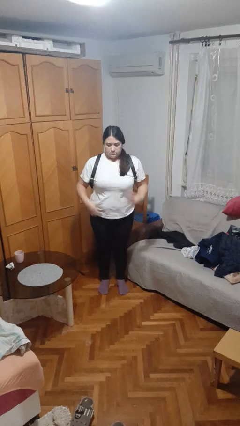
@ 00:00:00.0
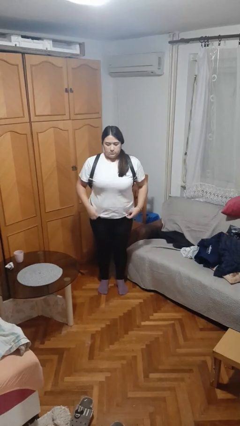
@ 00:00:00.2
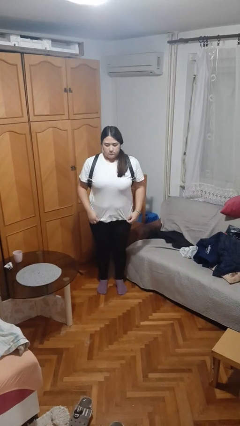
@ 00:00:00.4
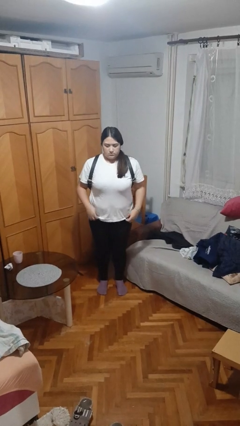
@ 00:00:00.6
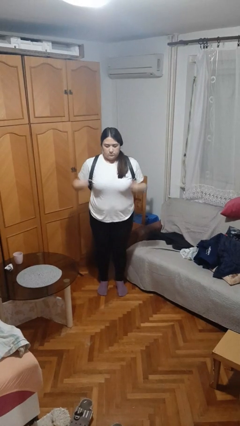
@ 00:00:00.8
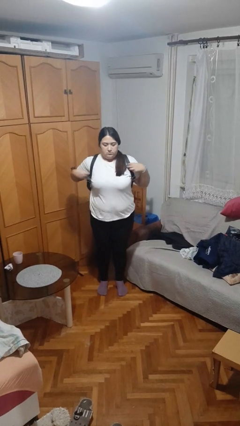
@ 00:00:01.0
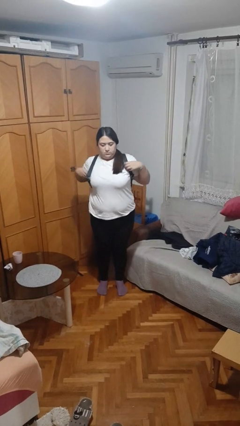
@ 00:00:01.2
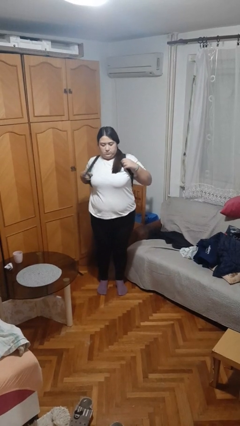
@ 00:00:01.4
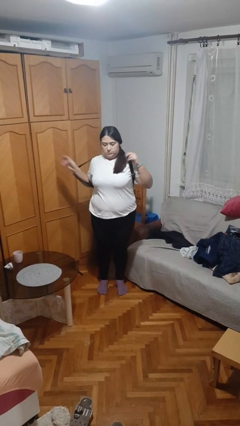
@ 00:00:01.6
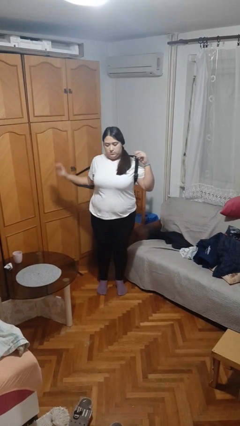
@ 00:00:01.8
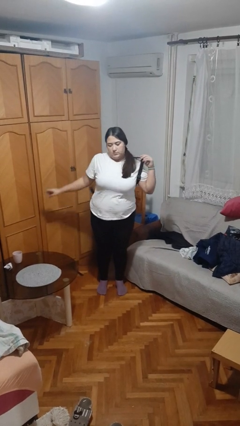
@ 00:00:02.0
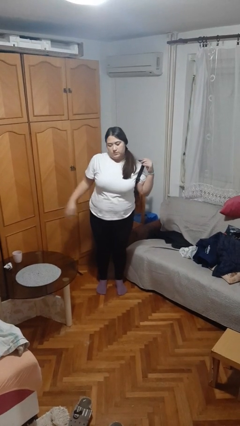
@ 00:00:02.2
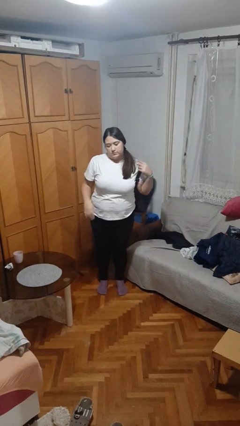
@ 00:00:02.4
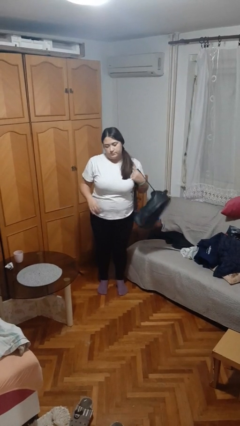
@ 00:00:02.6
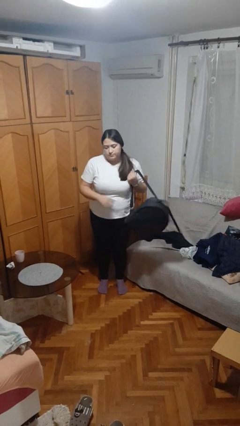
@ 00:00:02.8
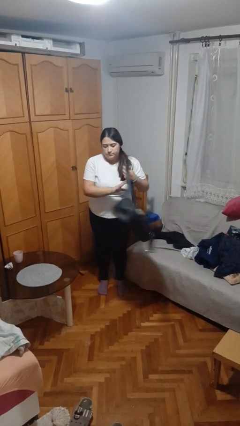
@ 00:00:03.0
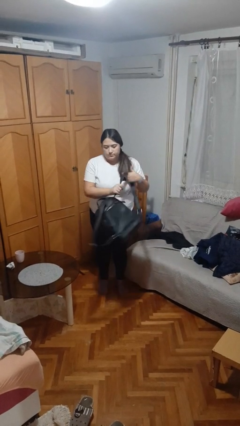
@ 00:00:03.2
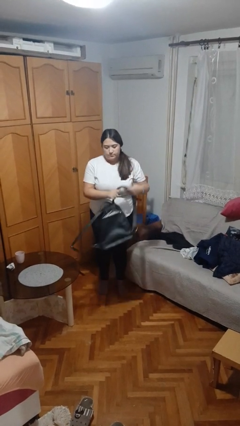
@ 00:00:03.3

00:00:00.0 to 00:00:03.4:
person takes off backpack

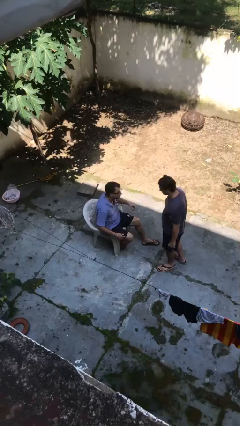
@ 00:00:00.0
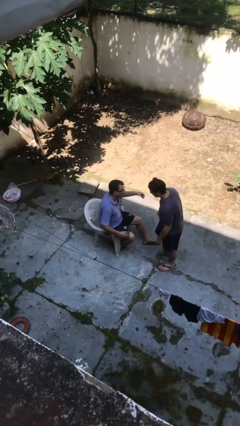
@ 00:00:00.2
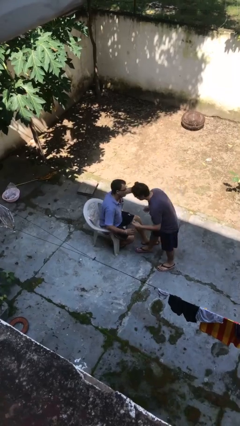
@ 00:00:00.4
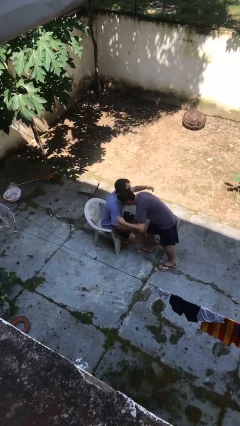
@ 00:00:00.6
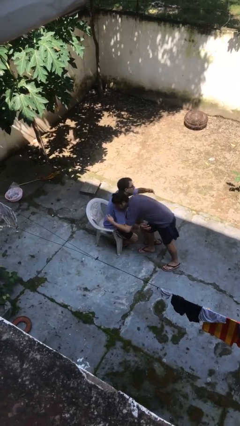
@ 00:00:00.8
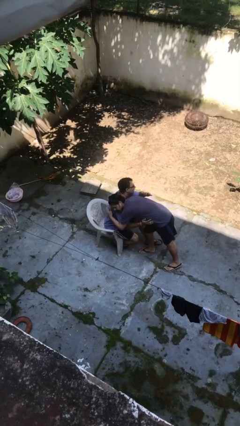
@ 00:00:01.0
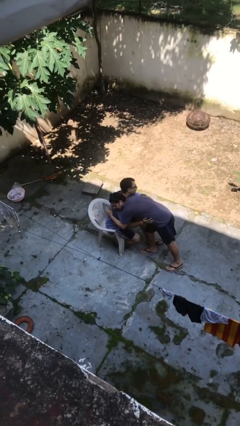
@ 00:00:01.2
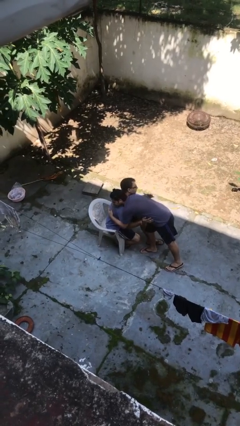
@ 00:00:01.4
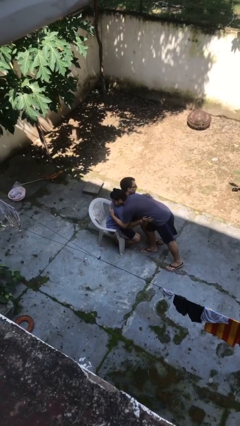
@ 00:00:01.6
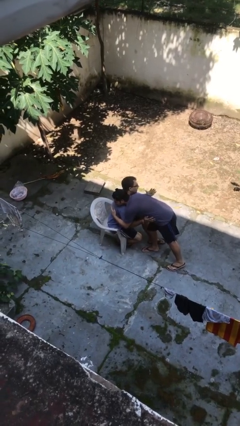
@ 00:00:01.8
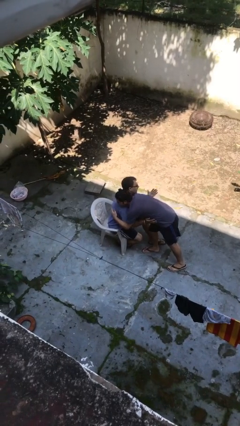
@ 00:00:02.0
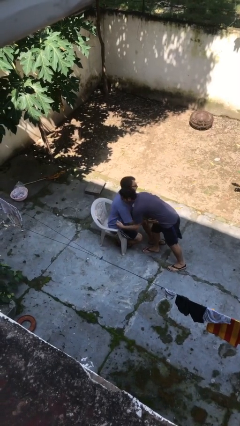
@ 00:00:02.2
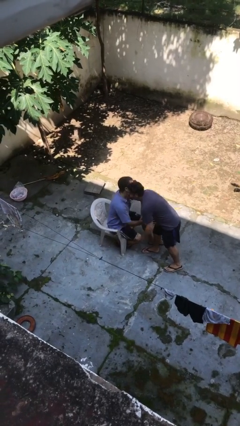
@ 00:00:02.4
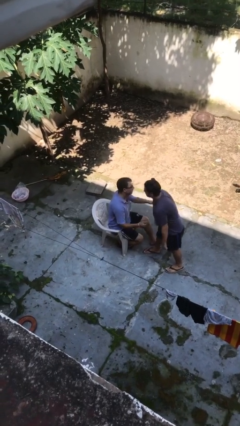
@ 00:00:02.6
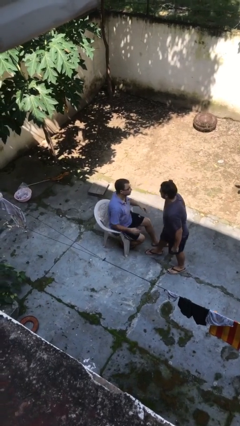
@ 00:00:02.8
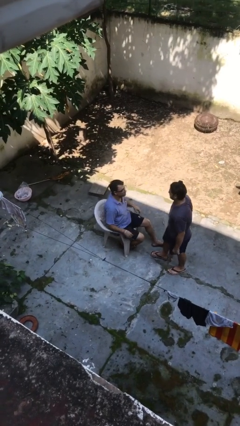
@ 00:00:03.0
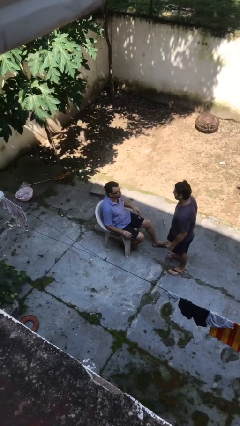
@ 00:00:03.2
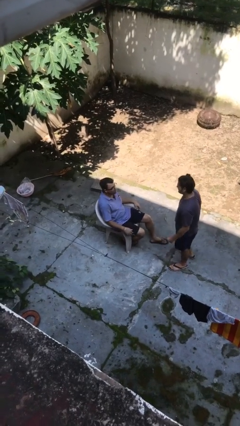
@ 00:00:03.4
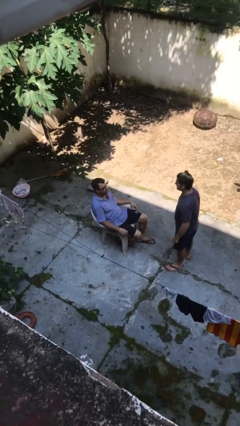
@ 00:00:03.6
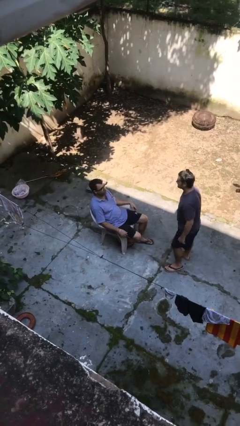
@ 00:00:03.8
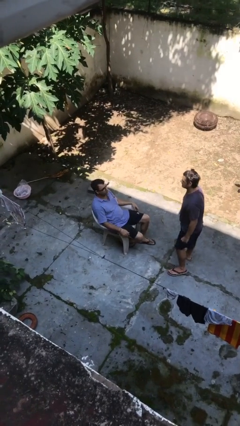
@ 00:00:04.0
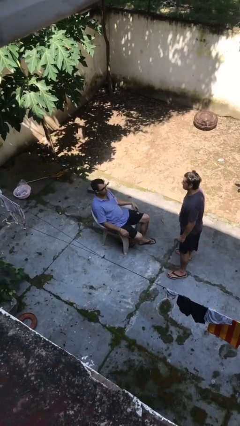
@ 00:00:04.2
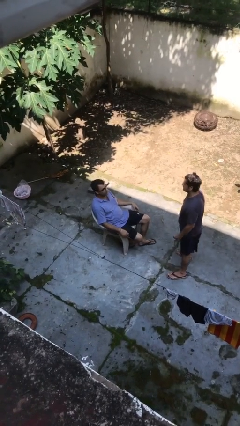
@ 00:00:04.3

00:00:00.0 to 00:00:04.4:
person embraces person

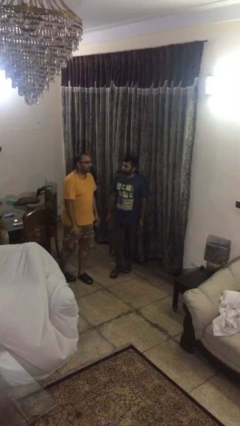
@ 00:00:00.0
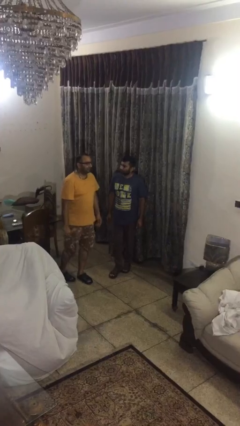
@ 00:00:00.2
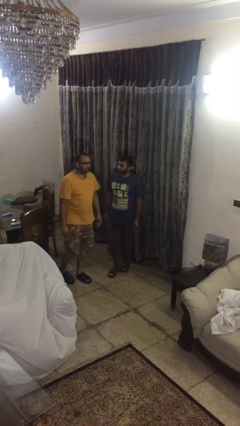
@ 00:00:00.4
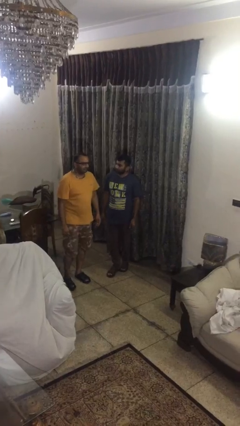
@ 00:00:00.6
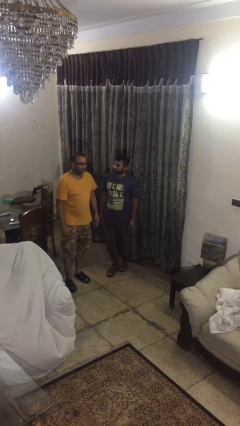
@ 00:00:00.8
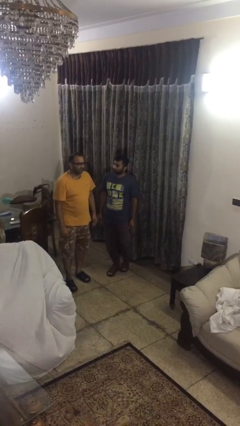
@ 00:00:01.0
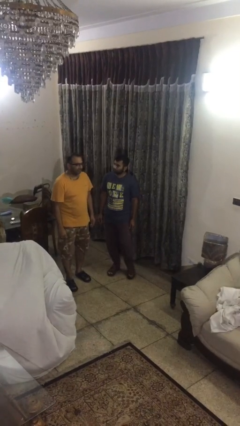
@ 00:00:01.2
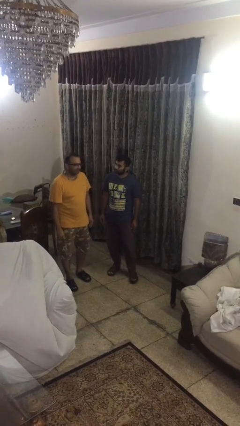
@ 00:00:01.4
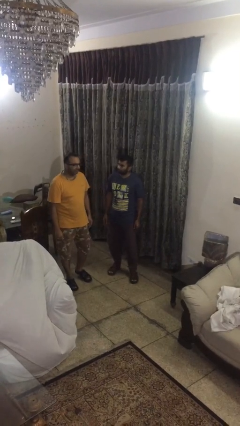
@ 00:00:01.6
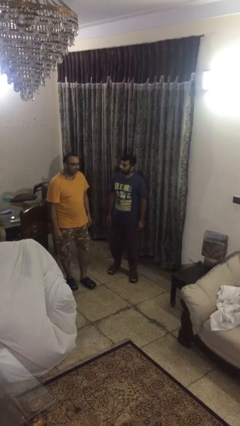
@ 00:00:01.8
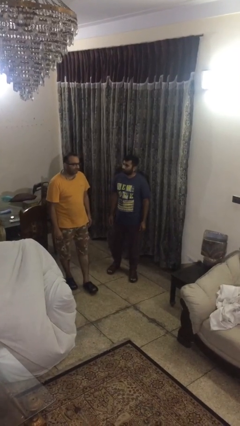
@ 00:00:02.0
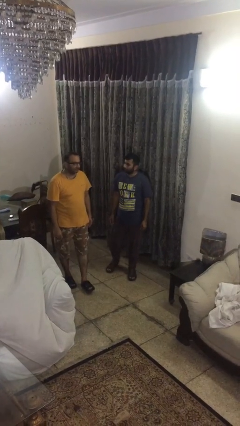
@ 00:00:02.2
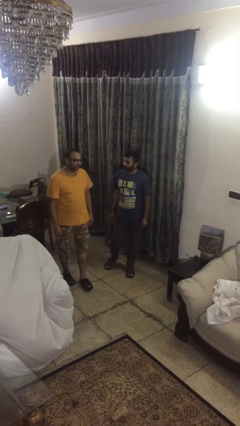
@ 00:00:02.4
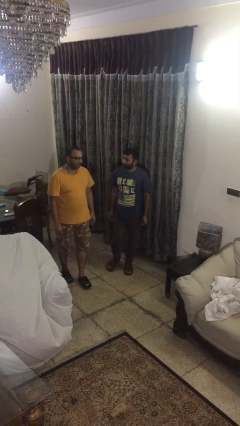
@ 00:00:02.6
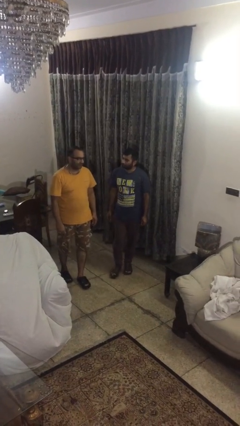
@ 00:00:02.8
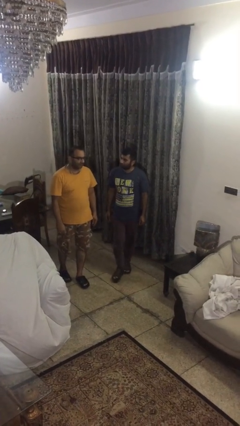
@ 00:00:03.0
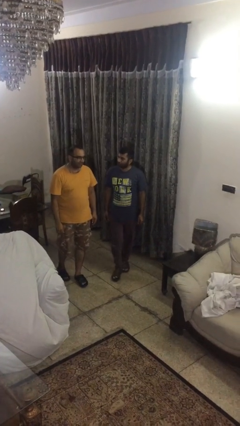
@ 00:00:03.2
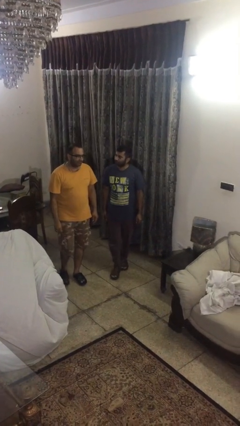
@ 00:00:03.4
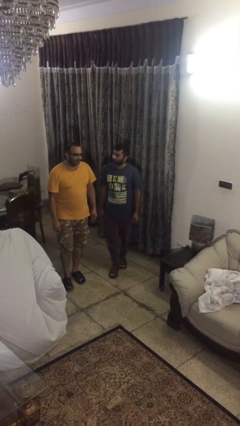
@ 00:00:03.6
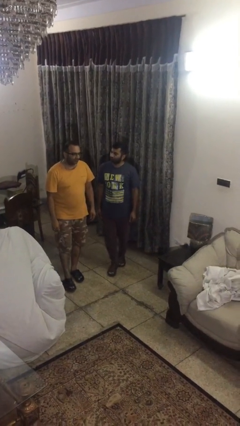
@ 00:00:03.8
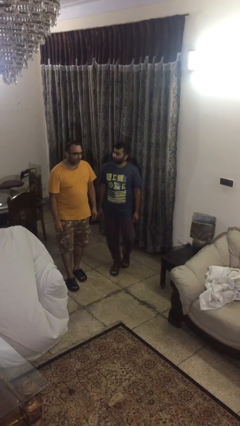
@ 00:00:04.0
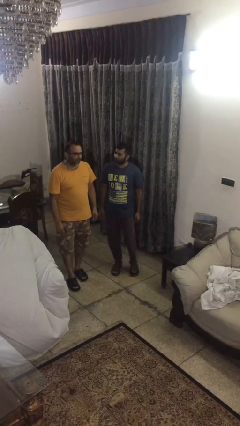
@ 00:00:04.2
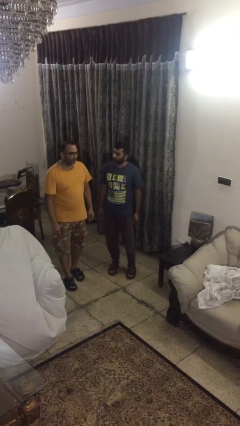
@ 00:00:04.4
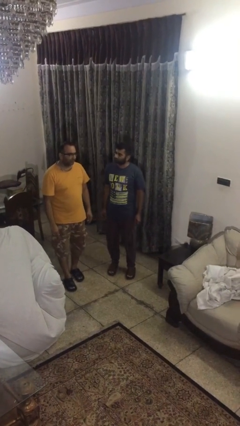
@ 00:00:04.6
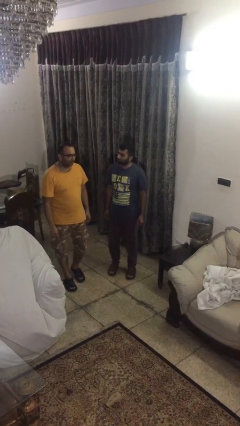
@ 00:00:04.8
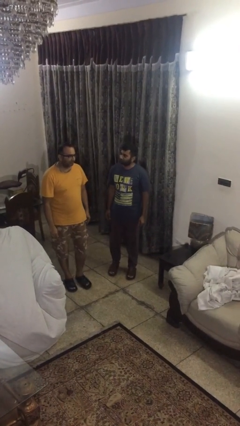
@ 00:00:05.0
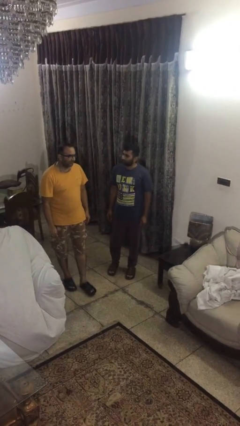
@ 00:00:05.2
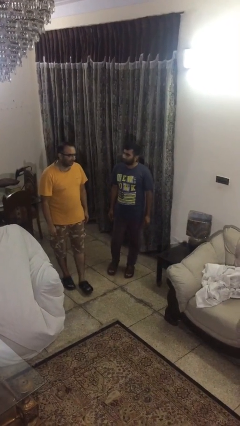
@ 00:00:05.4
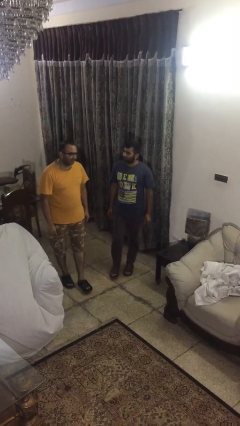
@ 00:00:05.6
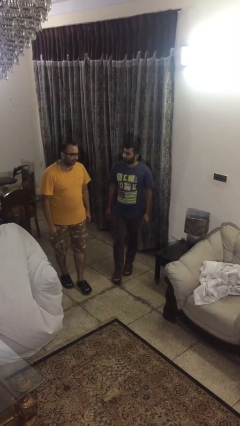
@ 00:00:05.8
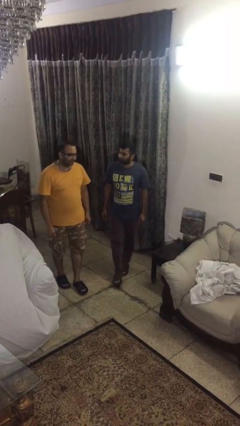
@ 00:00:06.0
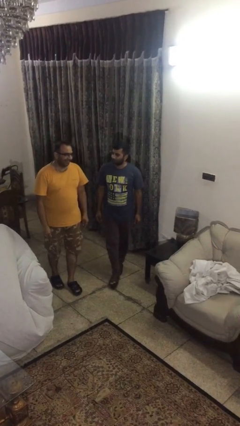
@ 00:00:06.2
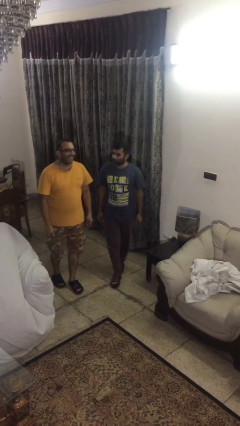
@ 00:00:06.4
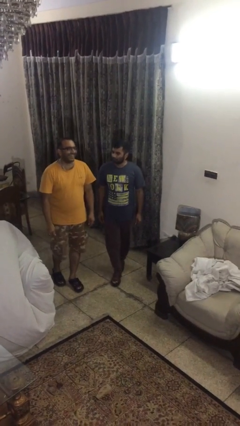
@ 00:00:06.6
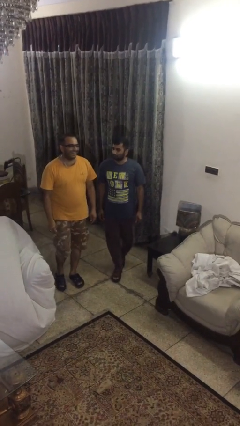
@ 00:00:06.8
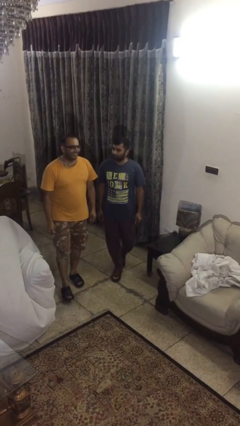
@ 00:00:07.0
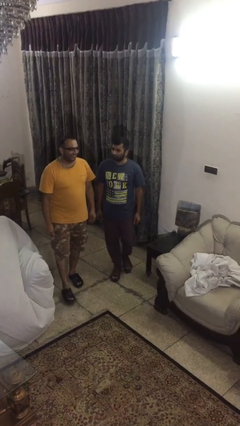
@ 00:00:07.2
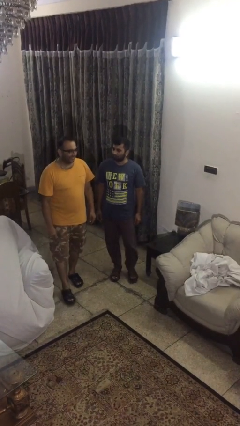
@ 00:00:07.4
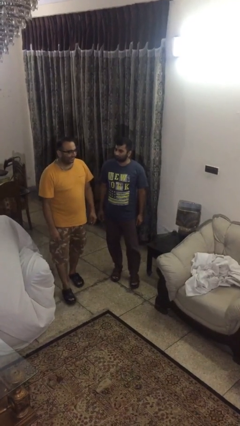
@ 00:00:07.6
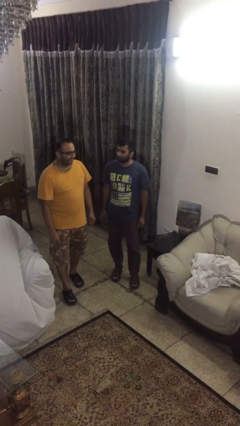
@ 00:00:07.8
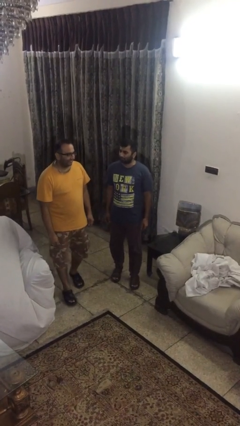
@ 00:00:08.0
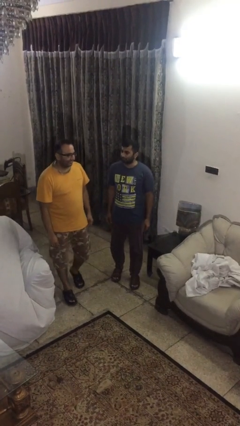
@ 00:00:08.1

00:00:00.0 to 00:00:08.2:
person talks to person

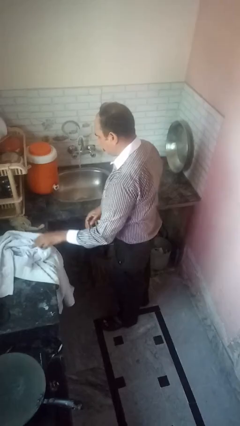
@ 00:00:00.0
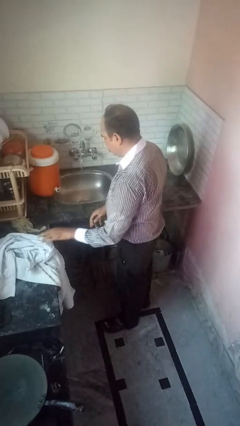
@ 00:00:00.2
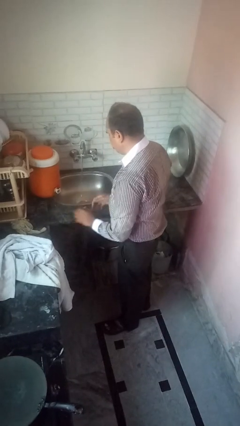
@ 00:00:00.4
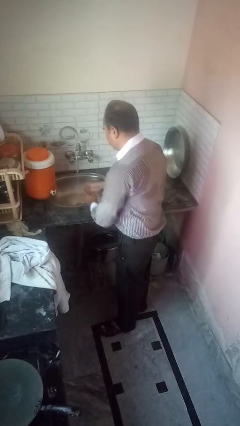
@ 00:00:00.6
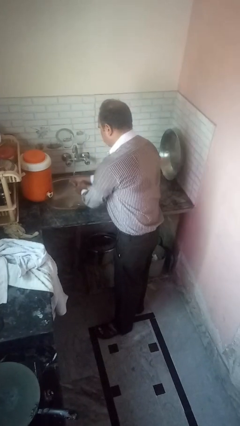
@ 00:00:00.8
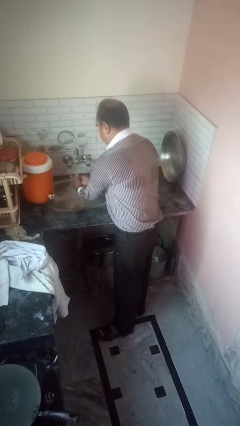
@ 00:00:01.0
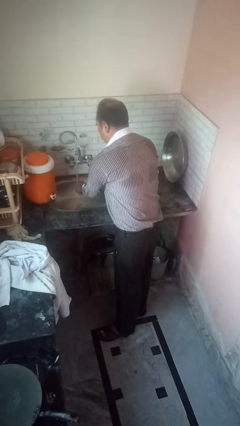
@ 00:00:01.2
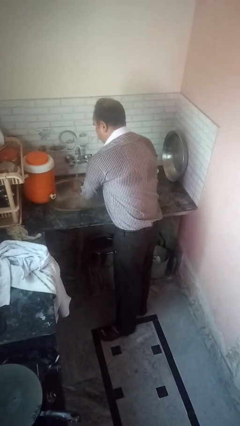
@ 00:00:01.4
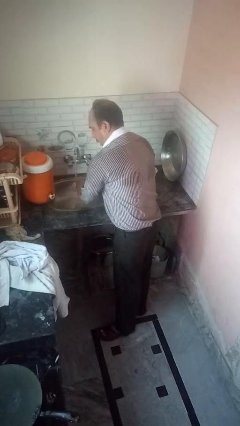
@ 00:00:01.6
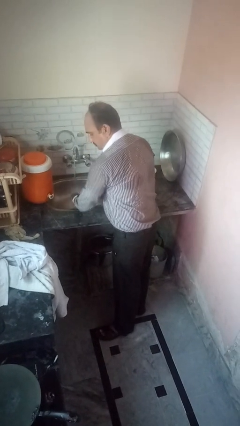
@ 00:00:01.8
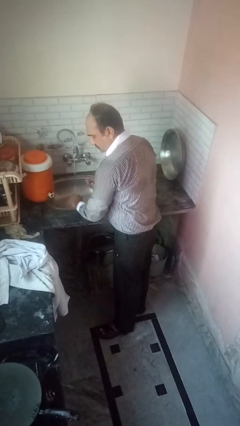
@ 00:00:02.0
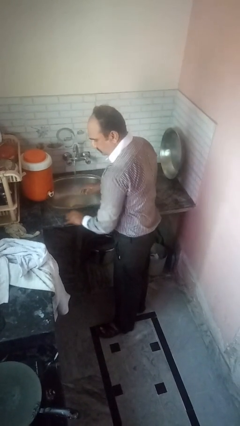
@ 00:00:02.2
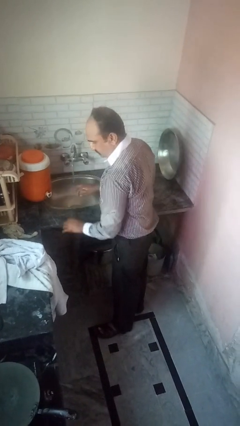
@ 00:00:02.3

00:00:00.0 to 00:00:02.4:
person washes hands
